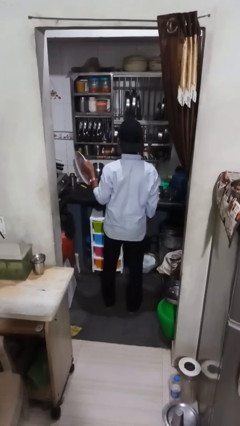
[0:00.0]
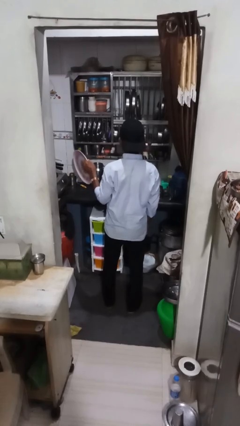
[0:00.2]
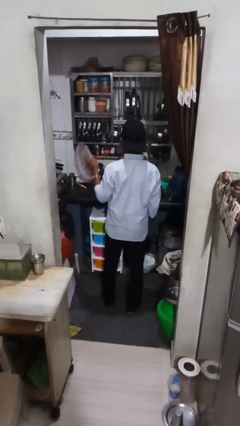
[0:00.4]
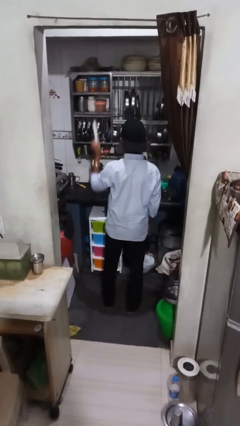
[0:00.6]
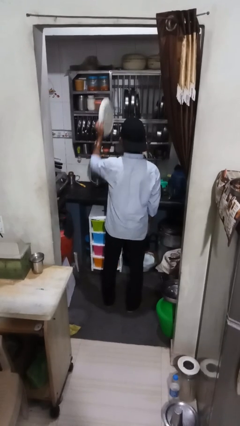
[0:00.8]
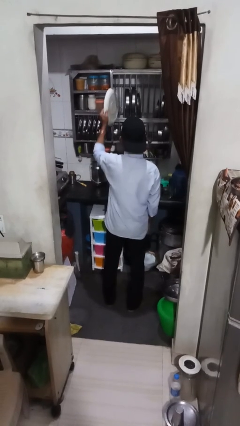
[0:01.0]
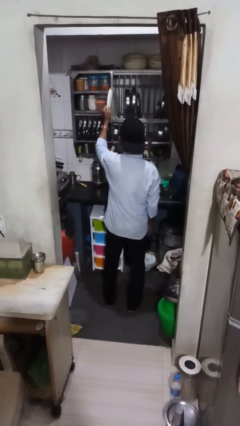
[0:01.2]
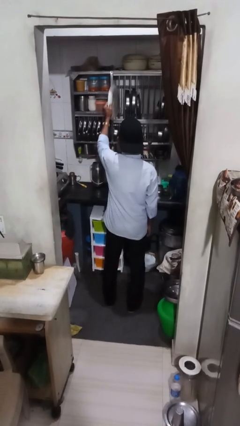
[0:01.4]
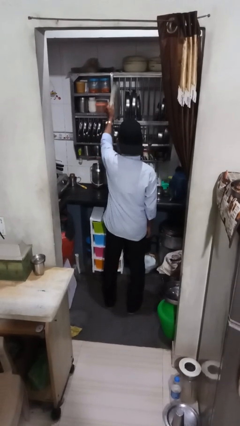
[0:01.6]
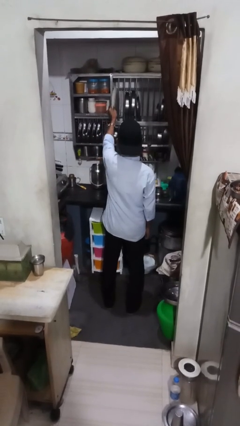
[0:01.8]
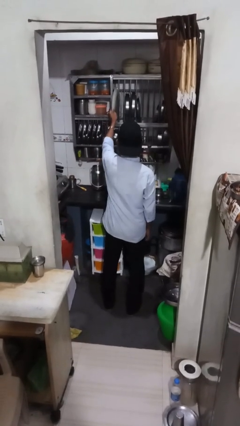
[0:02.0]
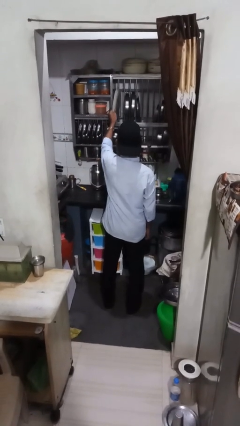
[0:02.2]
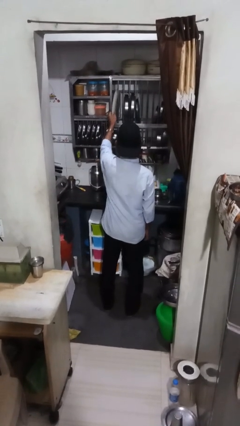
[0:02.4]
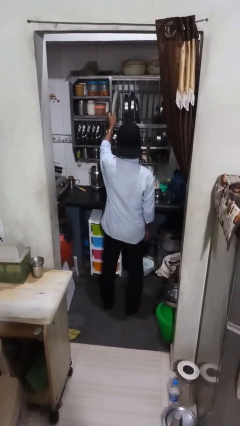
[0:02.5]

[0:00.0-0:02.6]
person puts object in cabinet

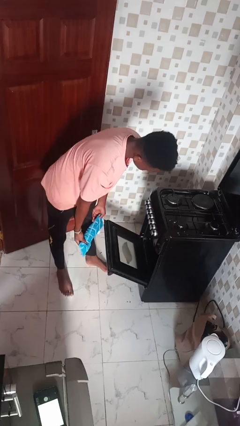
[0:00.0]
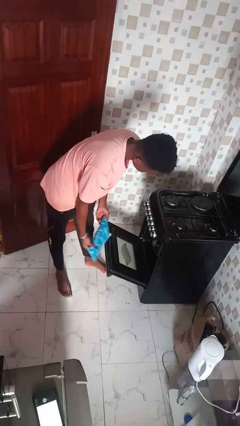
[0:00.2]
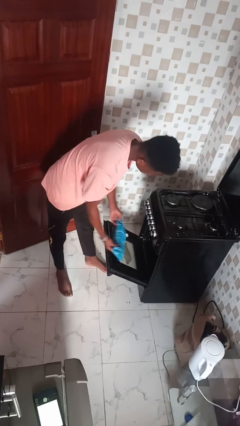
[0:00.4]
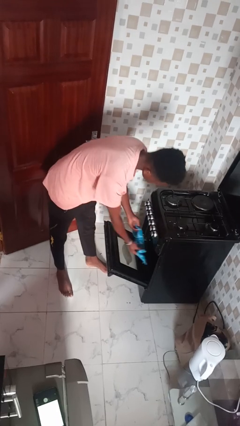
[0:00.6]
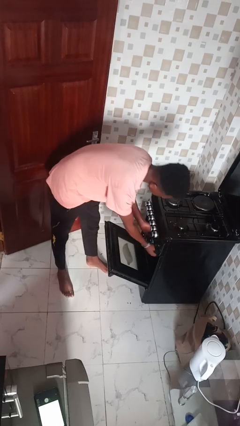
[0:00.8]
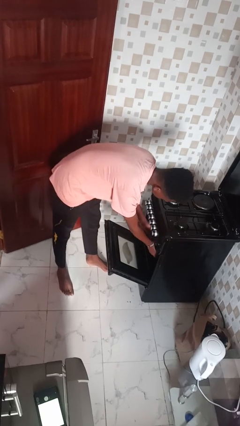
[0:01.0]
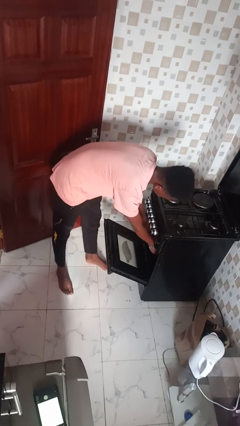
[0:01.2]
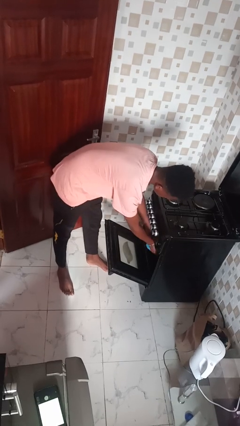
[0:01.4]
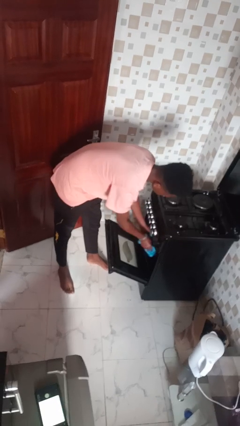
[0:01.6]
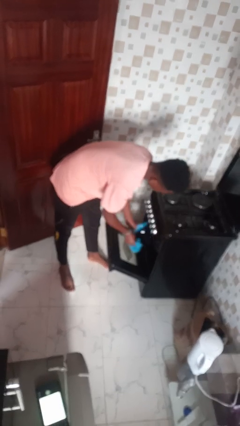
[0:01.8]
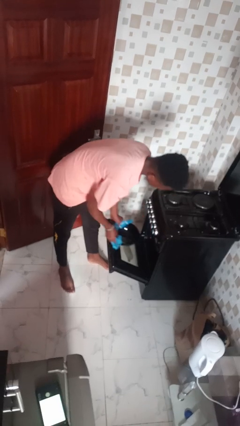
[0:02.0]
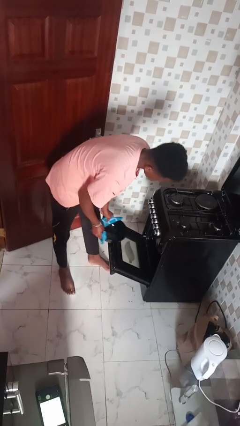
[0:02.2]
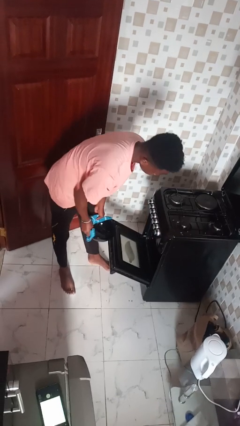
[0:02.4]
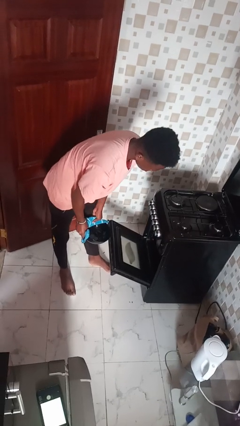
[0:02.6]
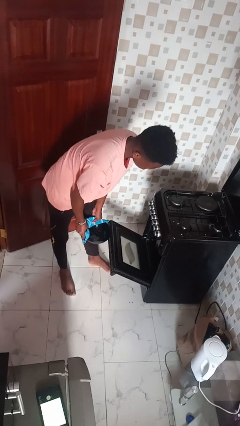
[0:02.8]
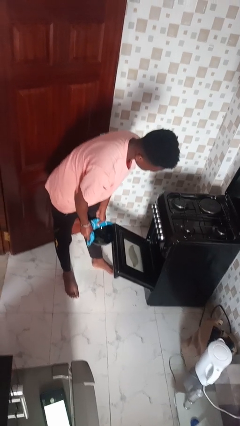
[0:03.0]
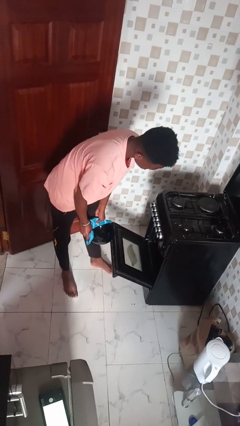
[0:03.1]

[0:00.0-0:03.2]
person takes object from oven

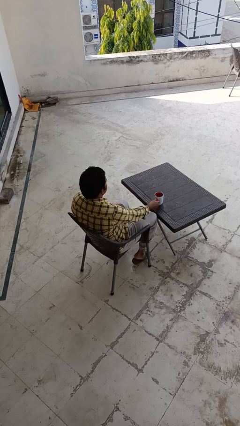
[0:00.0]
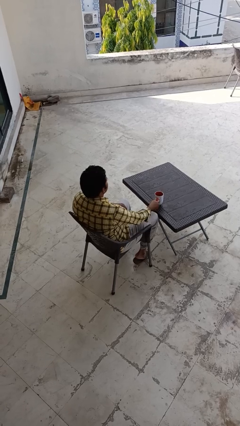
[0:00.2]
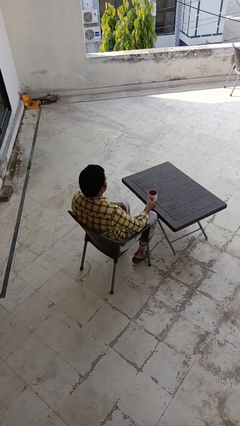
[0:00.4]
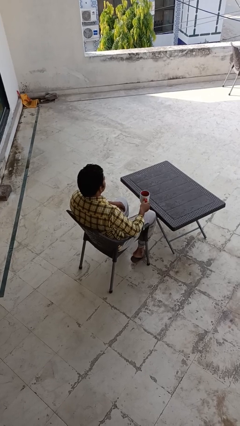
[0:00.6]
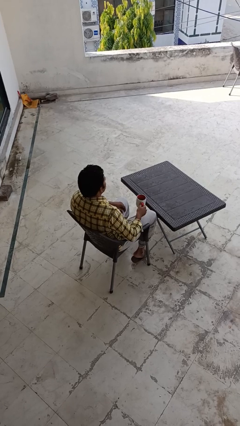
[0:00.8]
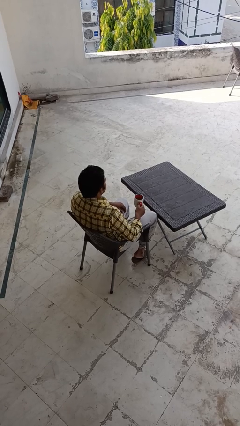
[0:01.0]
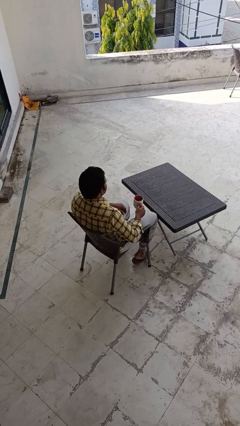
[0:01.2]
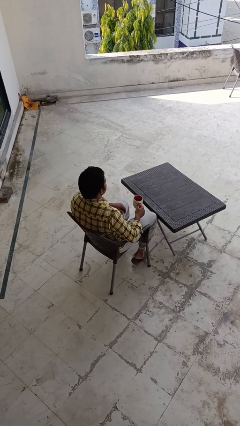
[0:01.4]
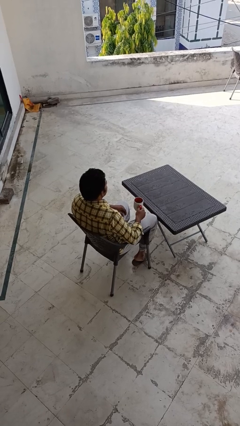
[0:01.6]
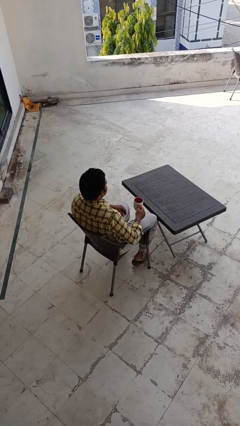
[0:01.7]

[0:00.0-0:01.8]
person picks up object from table

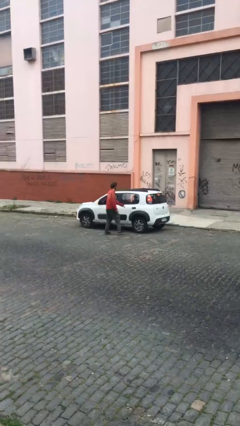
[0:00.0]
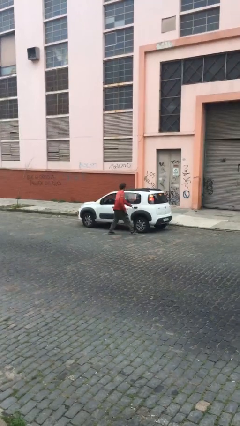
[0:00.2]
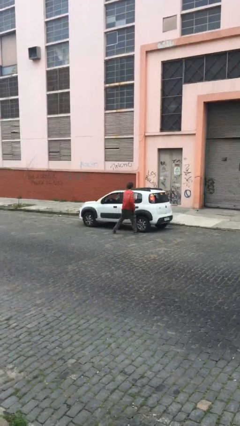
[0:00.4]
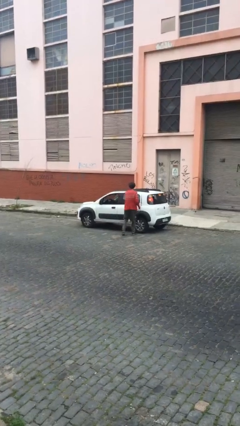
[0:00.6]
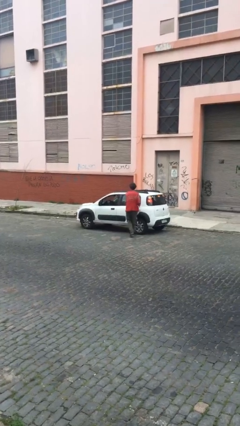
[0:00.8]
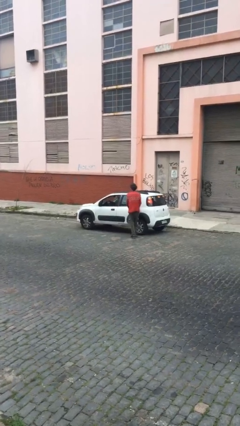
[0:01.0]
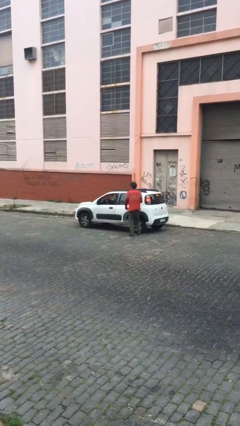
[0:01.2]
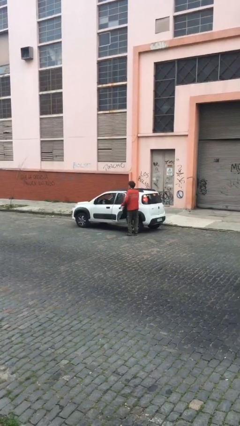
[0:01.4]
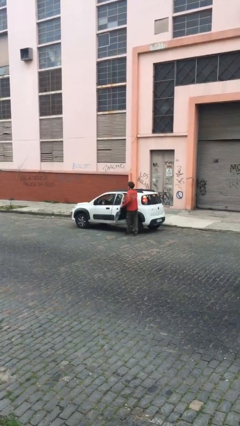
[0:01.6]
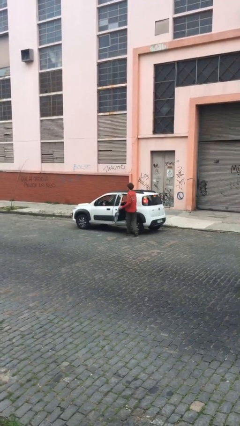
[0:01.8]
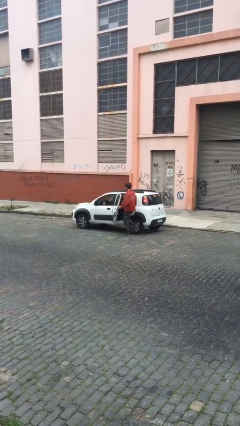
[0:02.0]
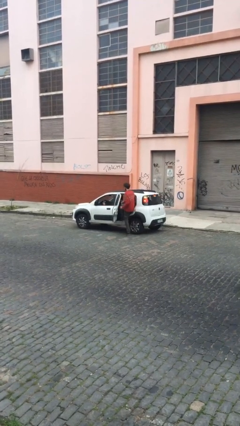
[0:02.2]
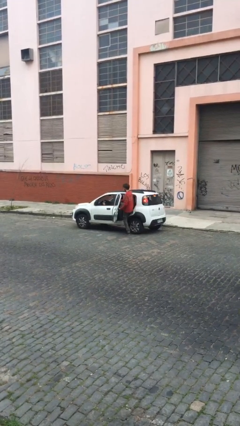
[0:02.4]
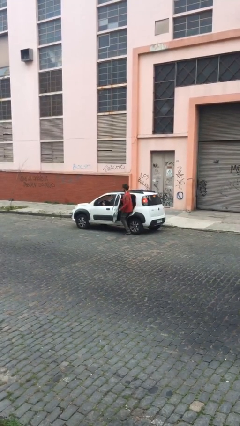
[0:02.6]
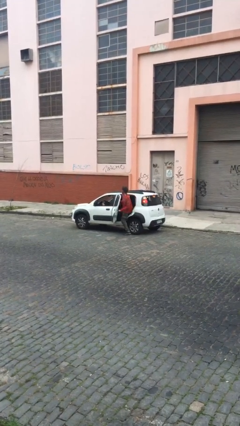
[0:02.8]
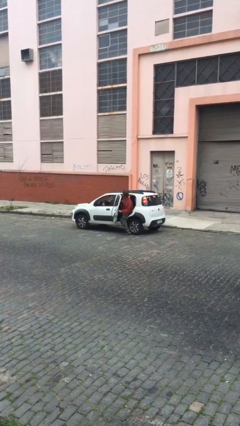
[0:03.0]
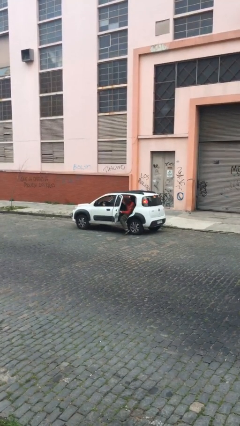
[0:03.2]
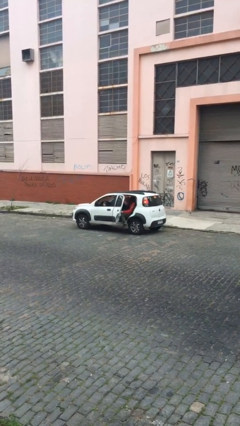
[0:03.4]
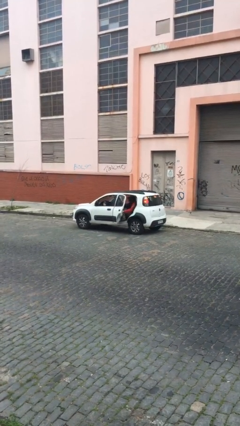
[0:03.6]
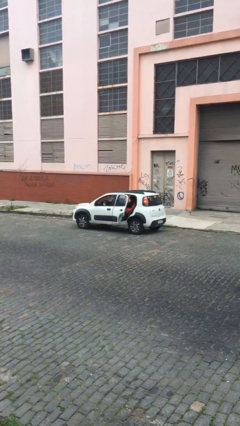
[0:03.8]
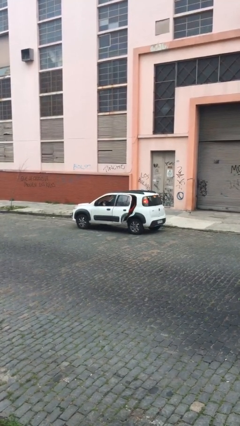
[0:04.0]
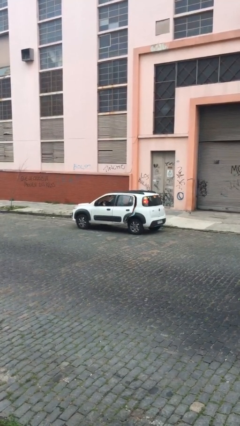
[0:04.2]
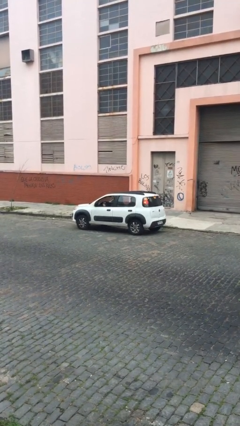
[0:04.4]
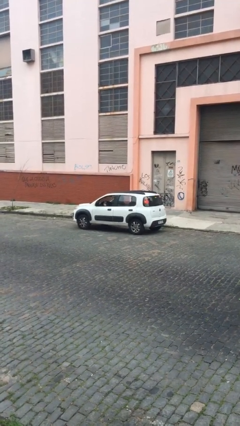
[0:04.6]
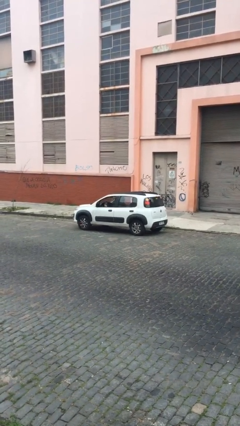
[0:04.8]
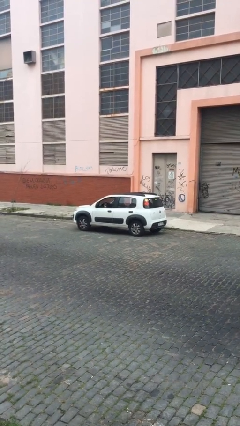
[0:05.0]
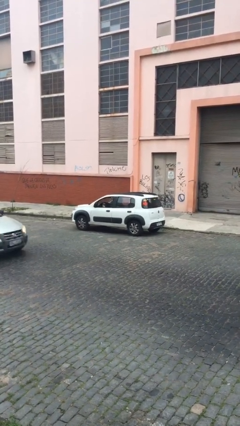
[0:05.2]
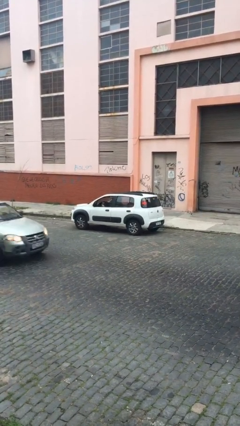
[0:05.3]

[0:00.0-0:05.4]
car picks up person

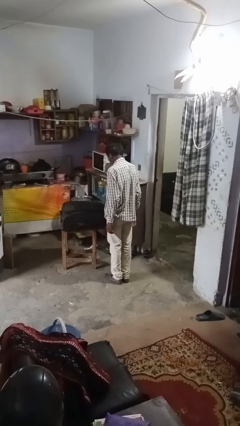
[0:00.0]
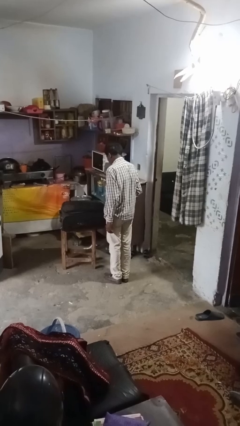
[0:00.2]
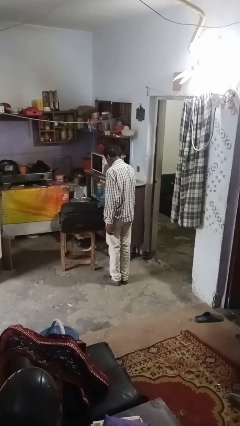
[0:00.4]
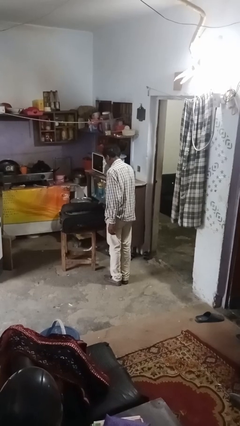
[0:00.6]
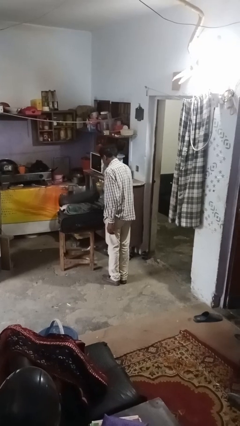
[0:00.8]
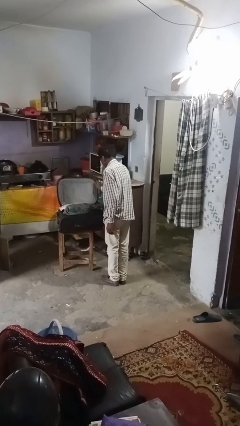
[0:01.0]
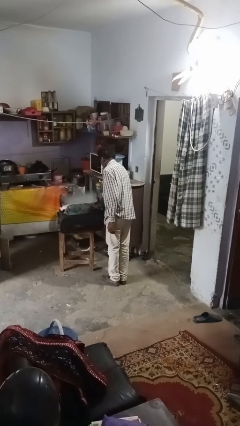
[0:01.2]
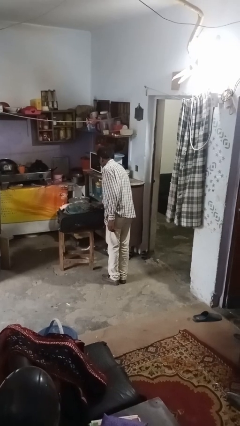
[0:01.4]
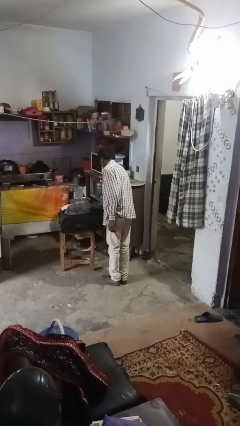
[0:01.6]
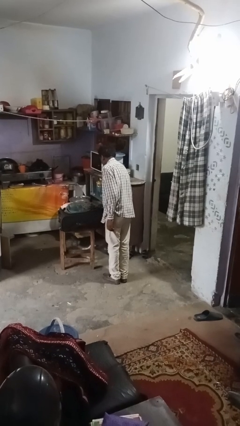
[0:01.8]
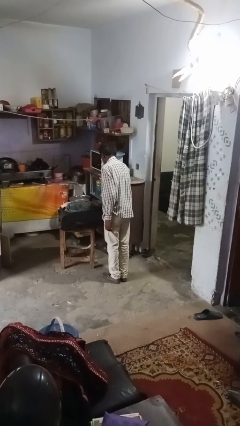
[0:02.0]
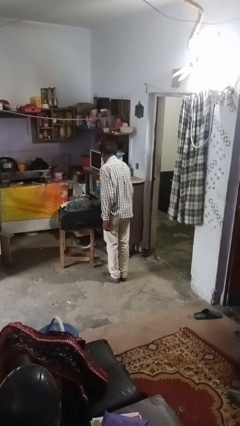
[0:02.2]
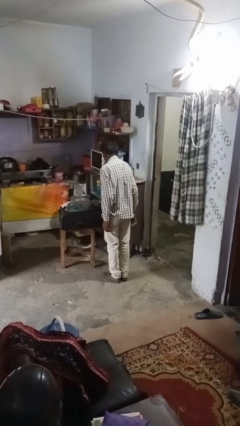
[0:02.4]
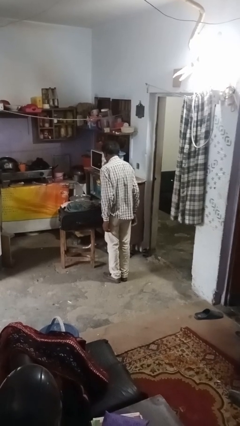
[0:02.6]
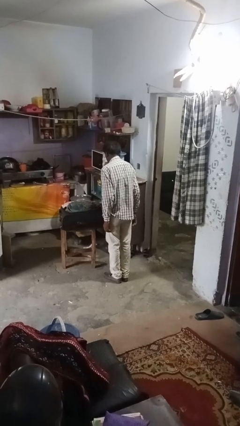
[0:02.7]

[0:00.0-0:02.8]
person opens suitcase

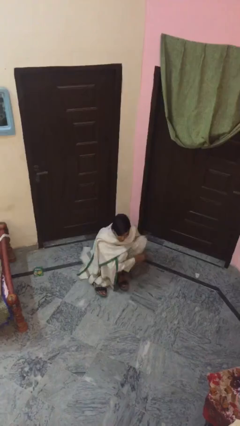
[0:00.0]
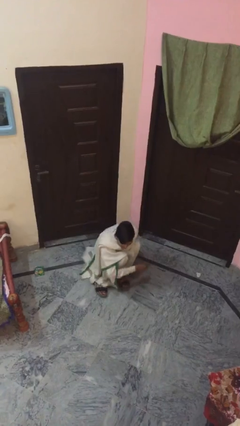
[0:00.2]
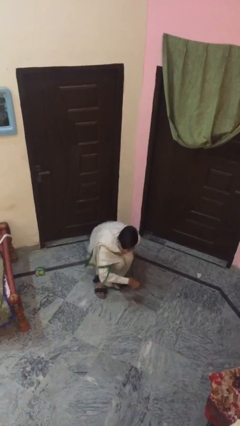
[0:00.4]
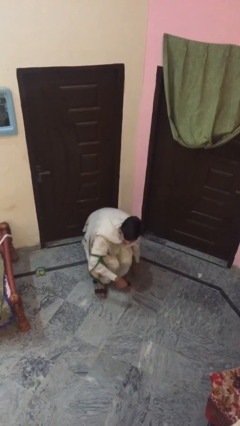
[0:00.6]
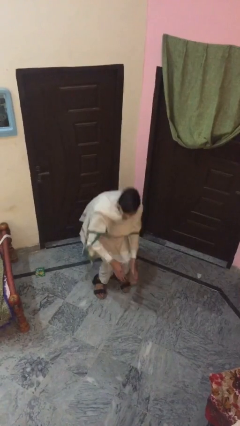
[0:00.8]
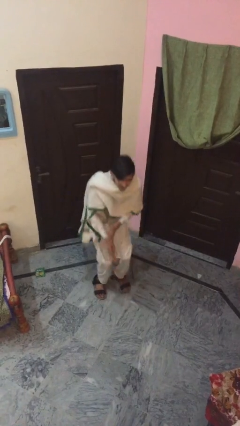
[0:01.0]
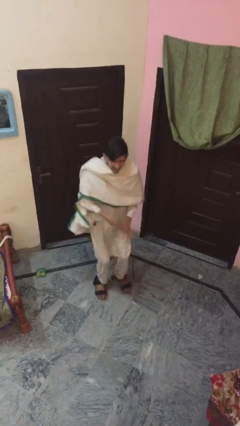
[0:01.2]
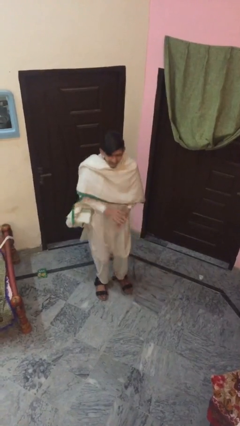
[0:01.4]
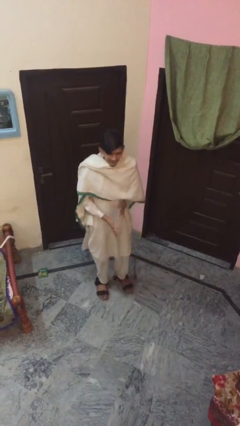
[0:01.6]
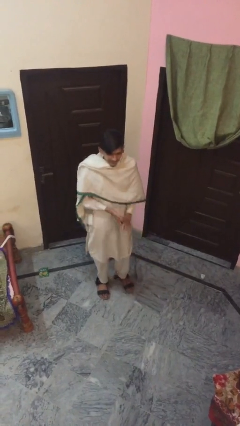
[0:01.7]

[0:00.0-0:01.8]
person stands up
